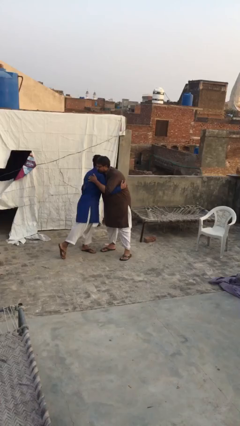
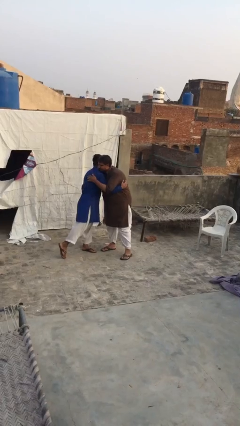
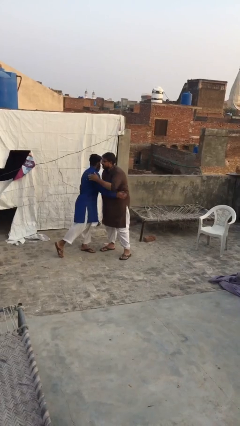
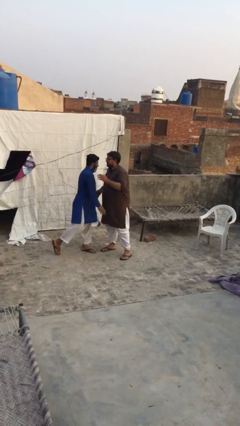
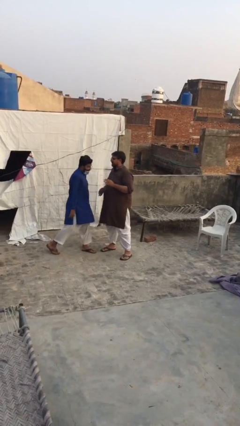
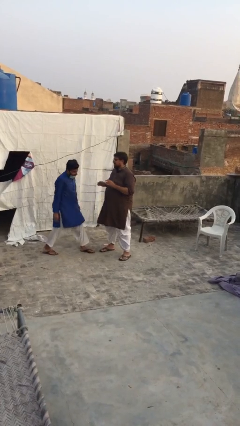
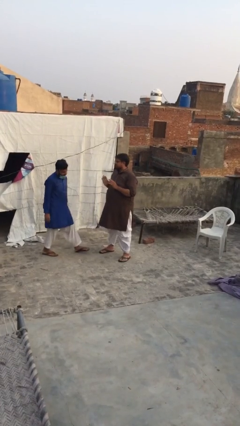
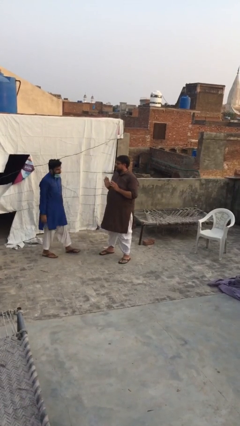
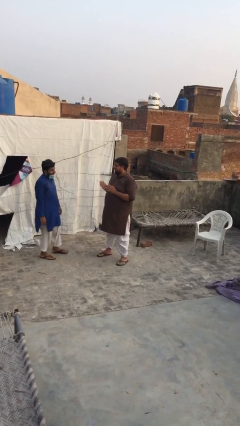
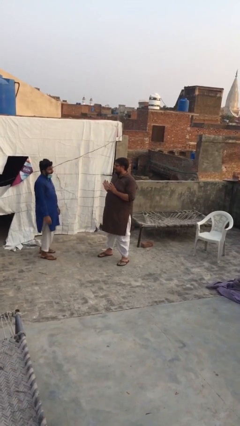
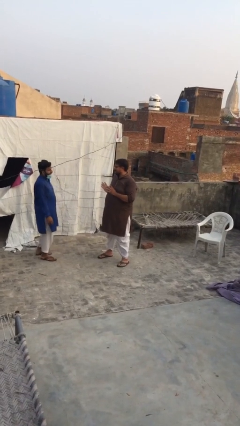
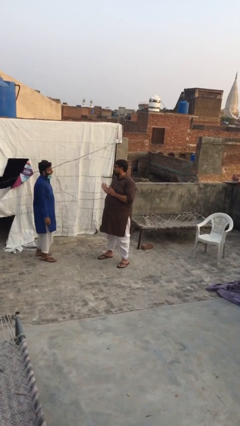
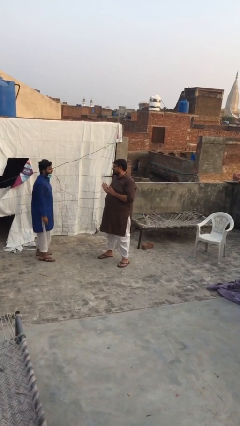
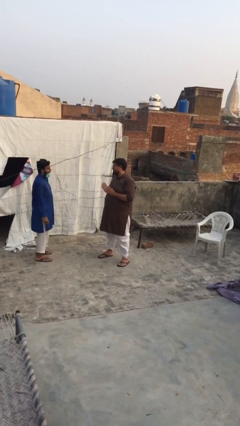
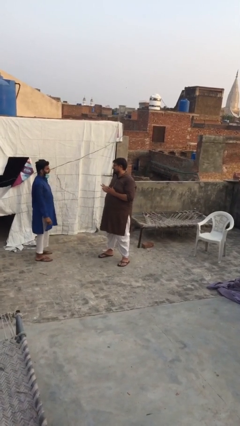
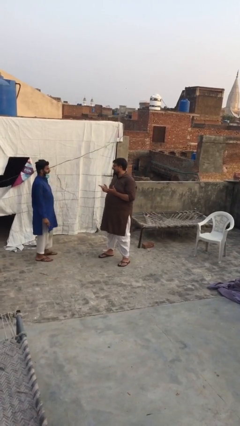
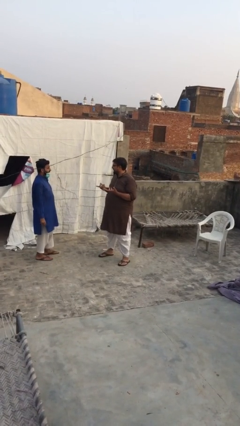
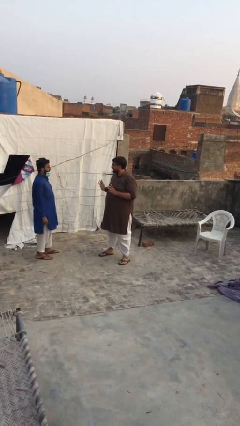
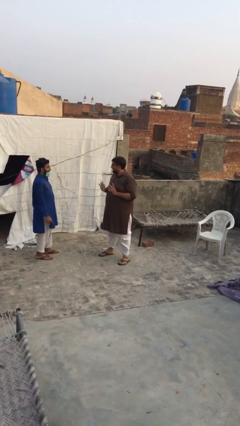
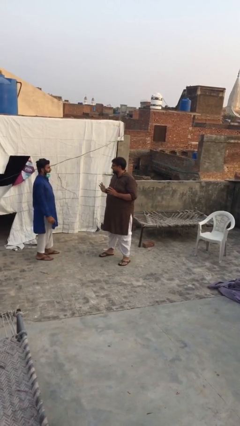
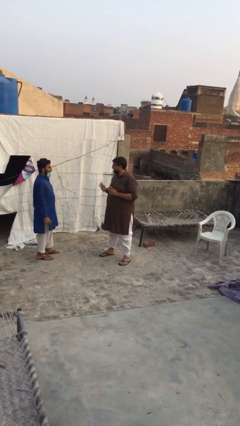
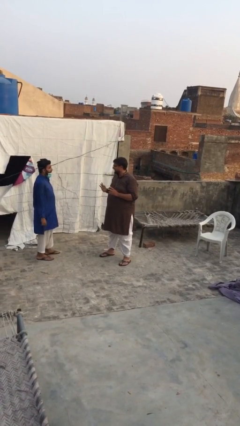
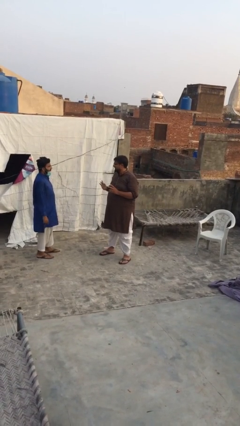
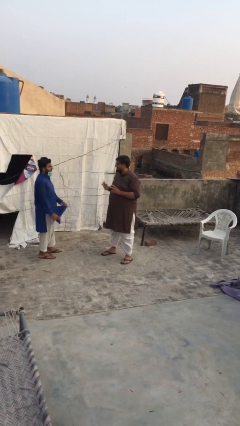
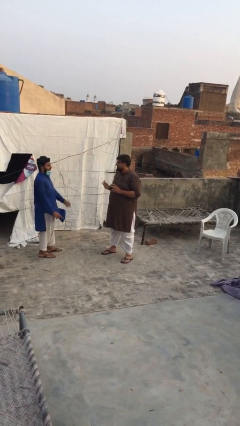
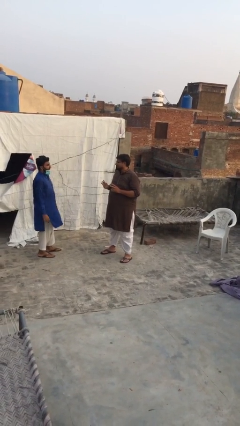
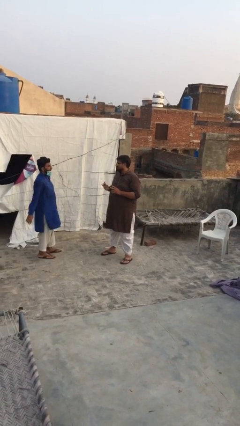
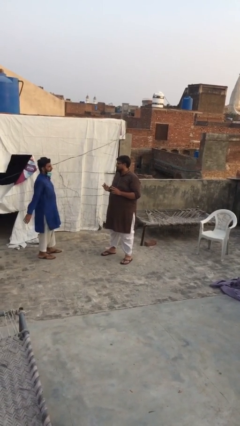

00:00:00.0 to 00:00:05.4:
person talks to person

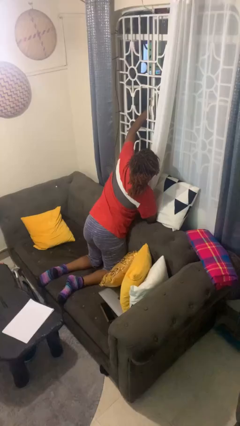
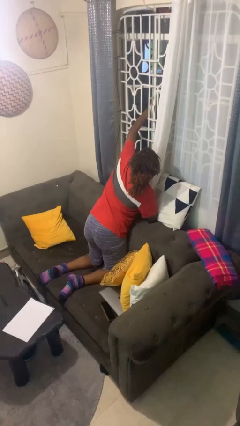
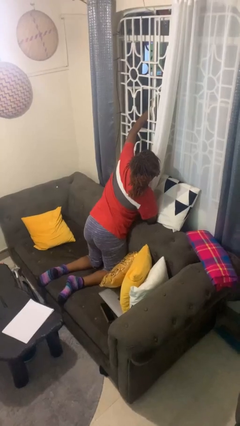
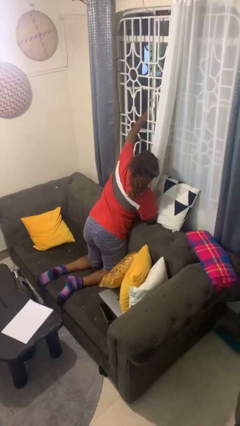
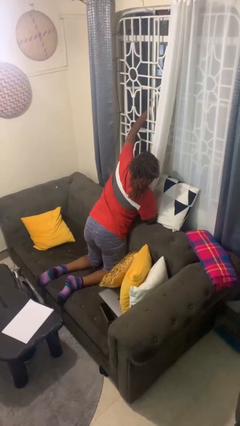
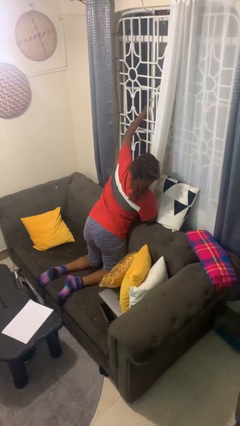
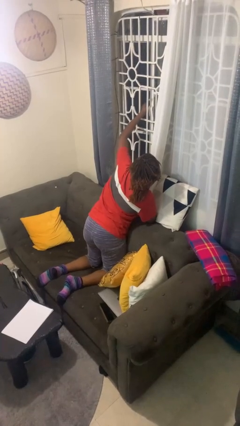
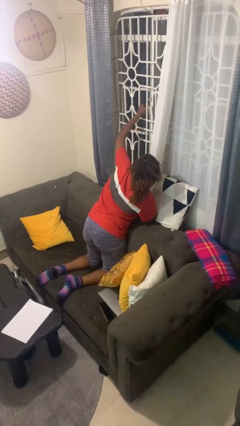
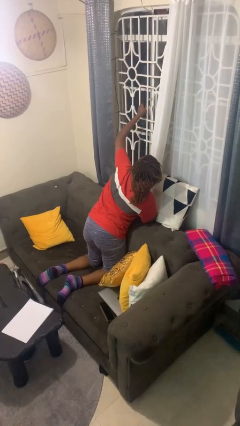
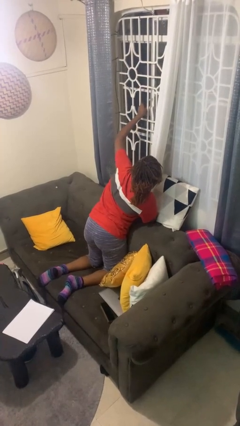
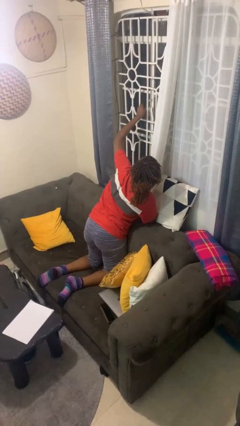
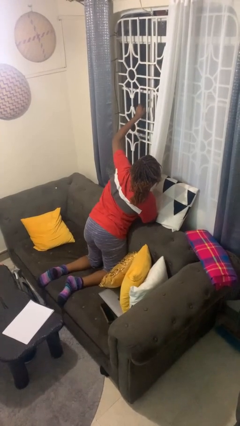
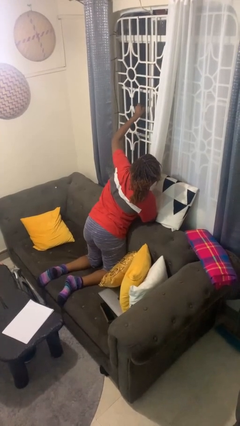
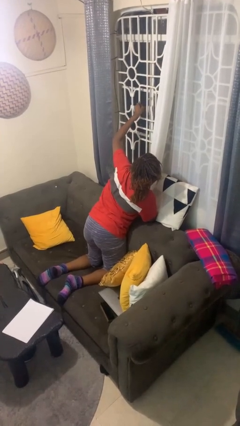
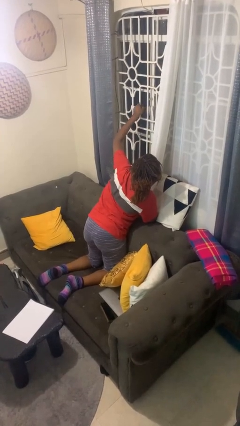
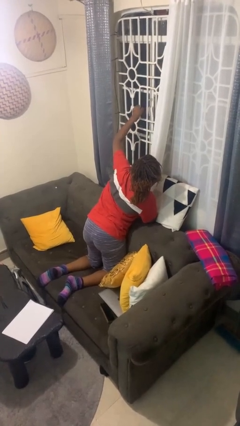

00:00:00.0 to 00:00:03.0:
person closes home window

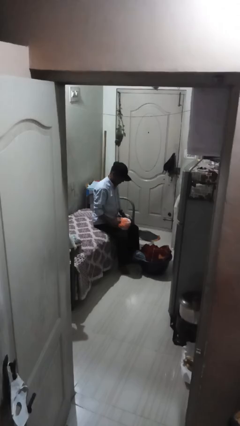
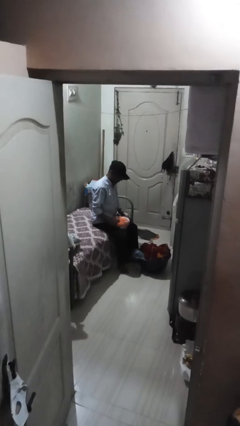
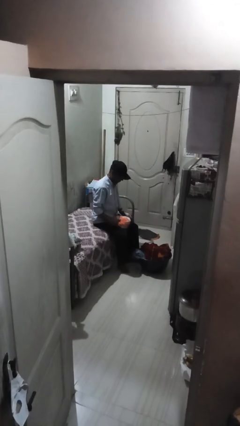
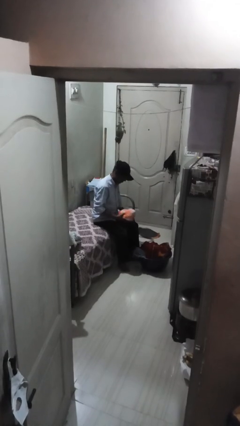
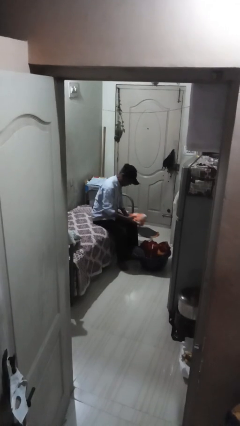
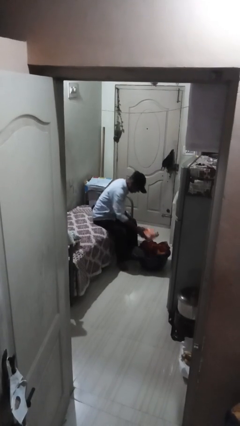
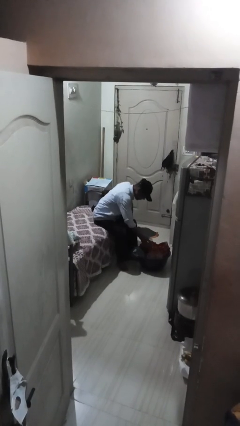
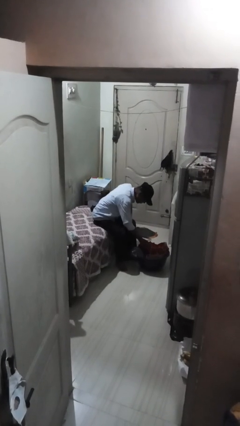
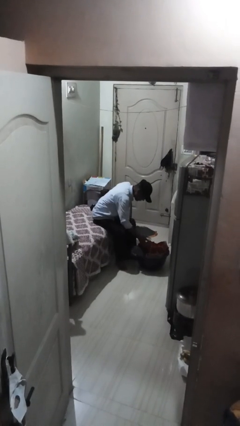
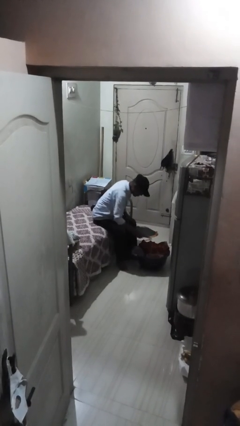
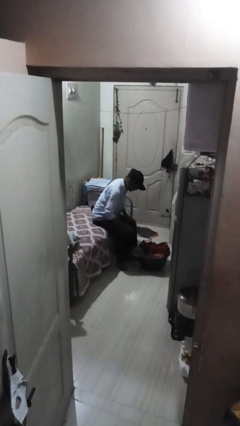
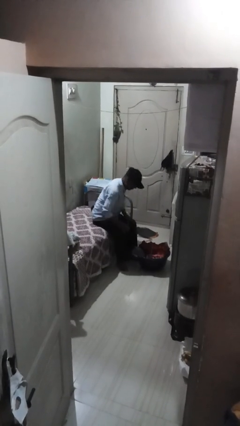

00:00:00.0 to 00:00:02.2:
person puts object into basket

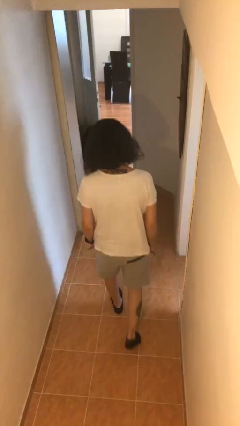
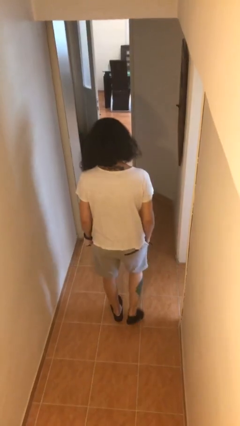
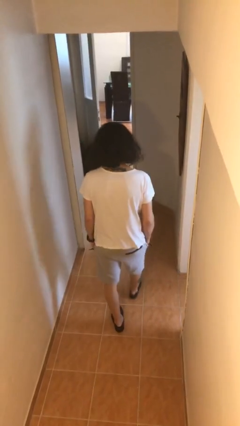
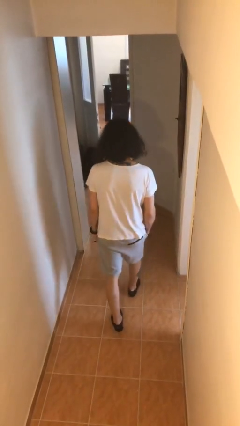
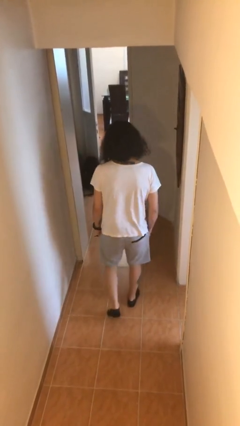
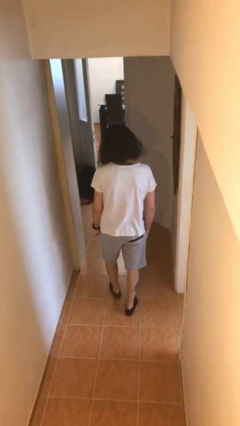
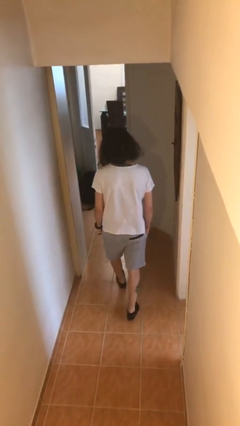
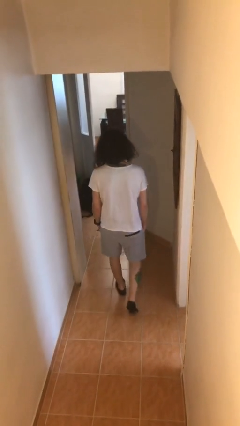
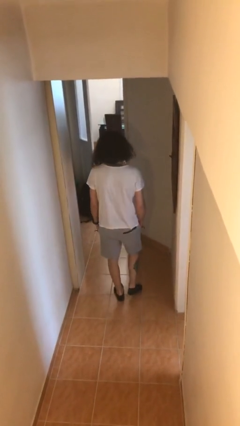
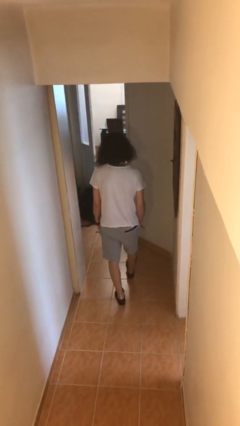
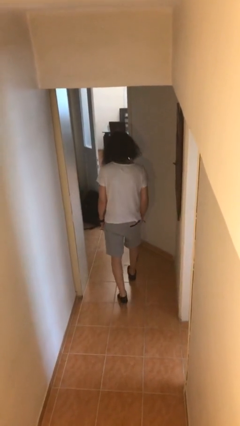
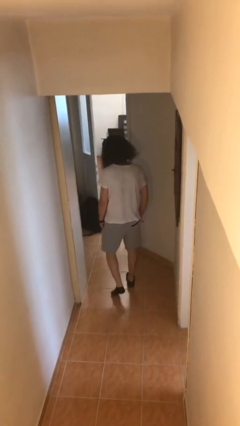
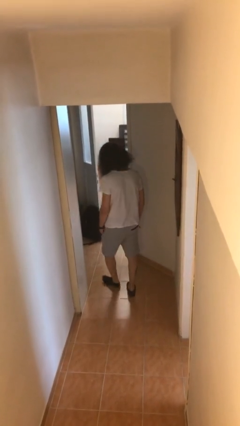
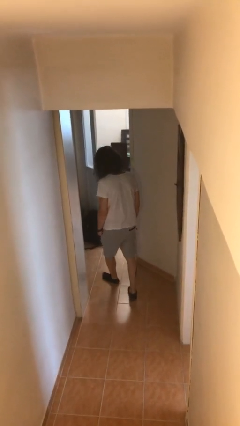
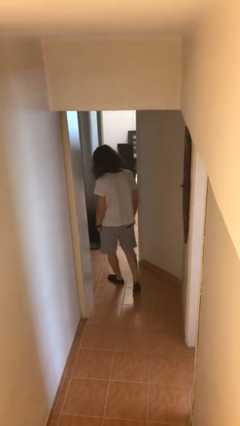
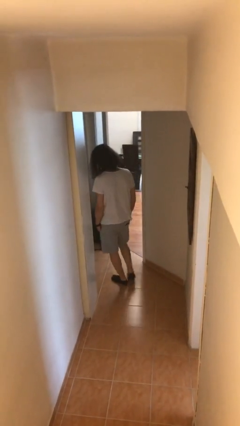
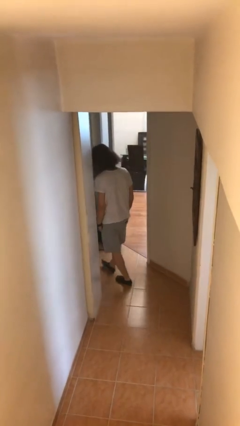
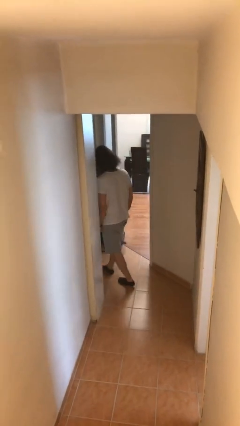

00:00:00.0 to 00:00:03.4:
person exits scene through structure

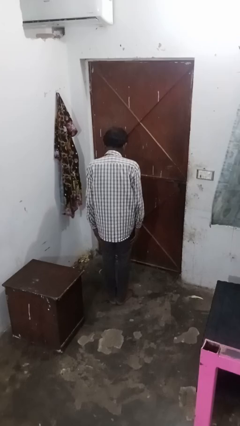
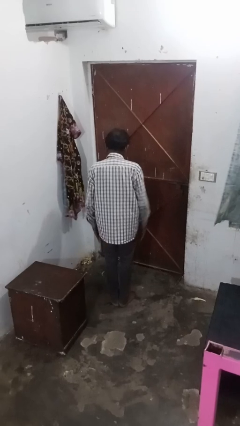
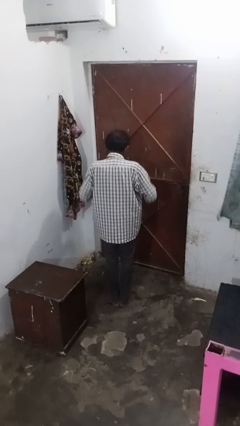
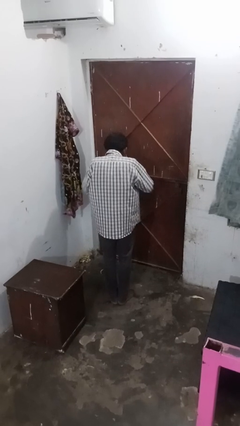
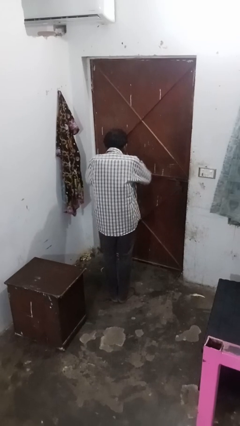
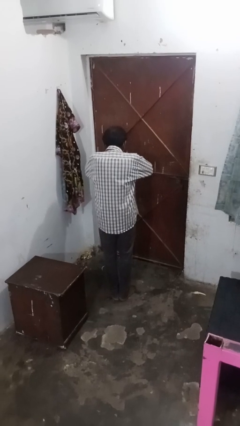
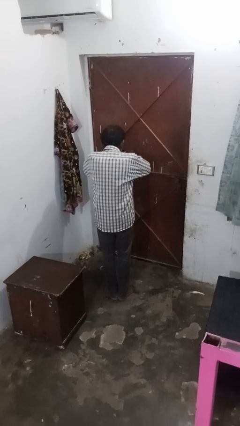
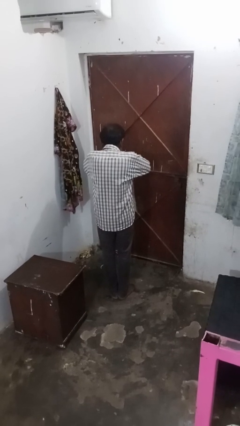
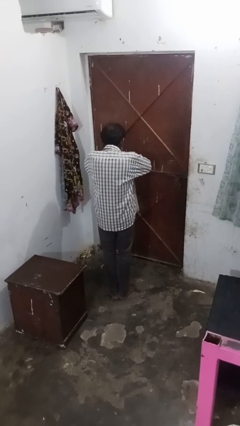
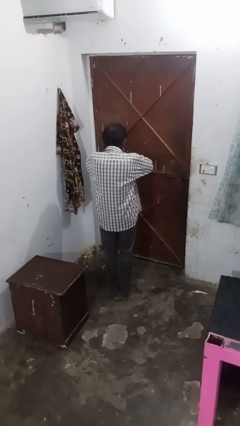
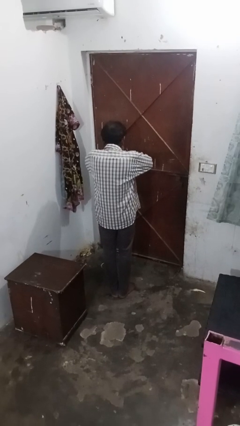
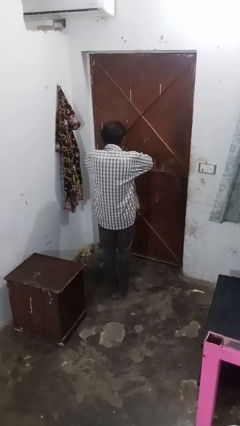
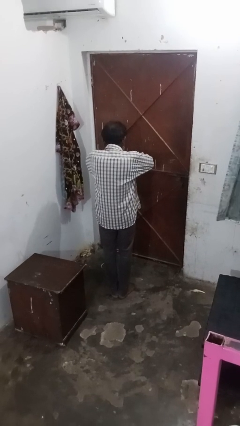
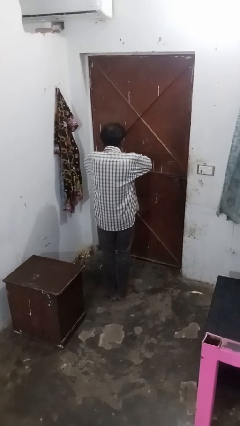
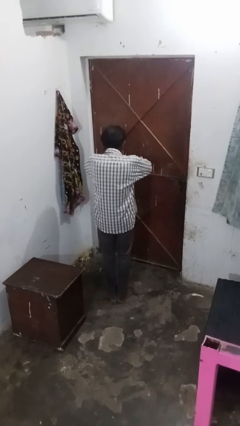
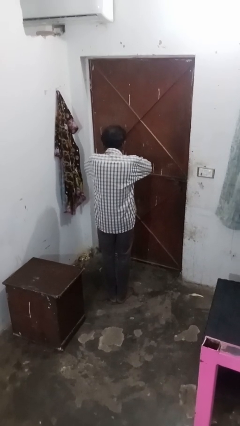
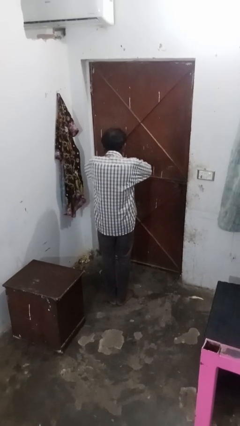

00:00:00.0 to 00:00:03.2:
person blows nose

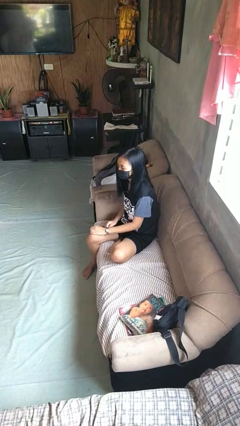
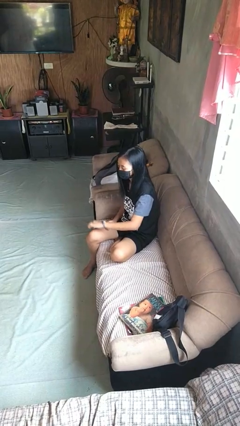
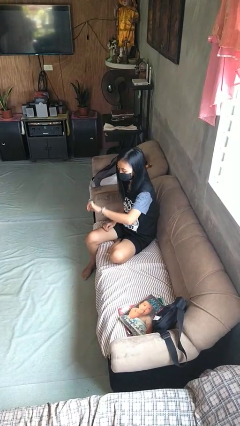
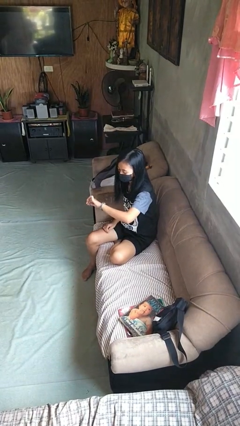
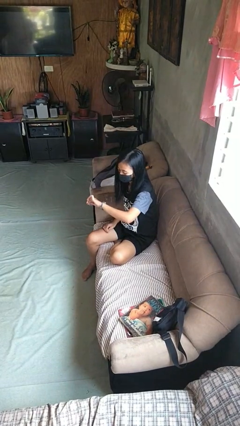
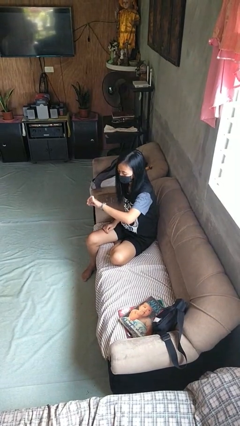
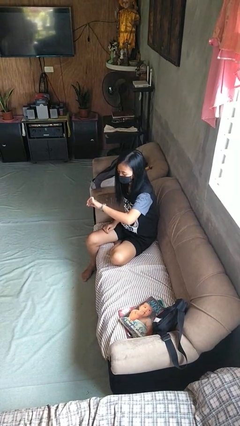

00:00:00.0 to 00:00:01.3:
person looks at wristwatch
